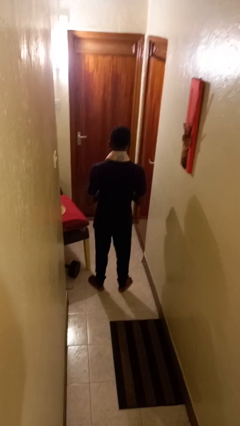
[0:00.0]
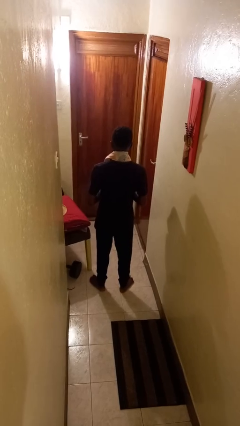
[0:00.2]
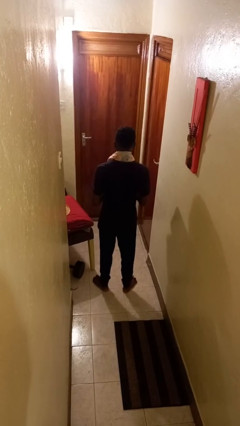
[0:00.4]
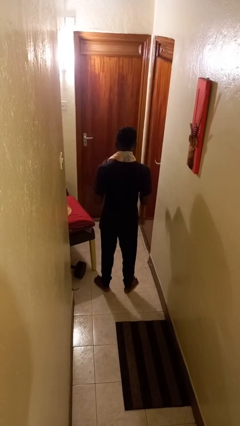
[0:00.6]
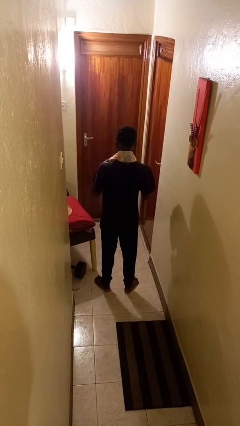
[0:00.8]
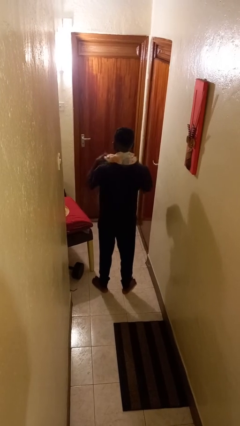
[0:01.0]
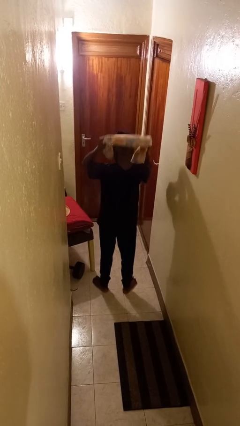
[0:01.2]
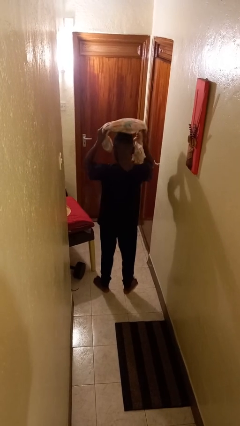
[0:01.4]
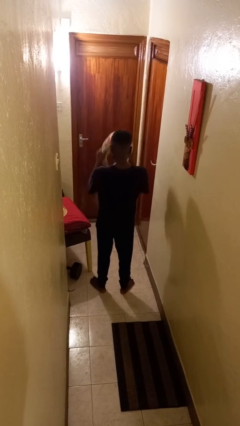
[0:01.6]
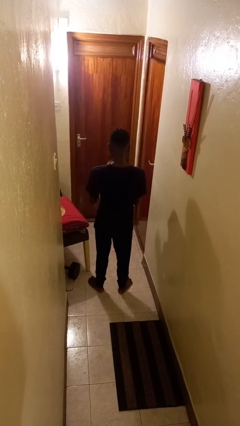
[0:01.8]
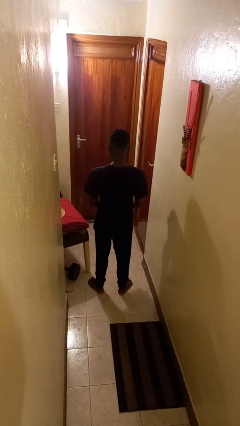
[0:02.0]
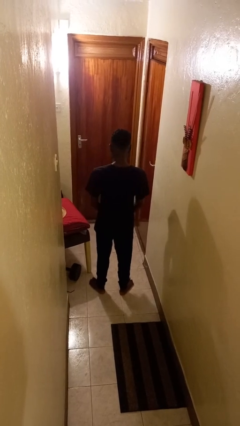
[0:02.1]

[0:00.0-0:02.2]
person takes off scarf

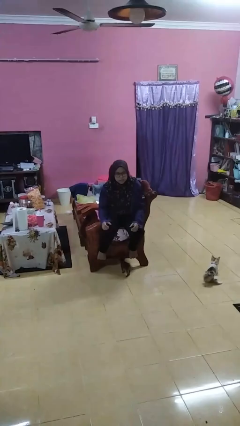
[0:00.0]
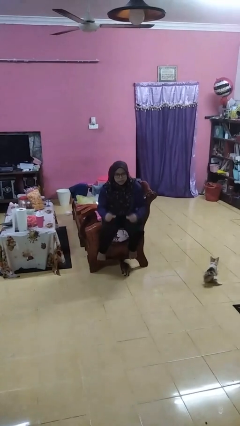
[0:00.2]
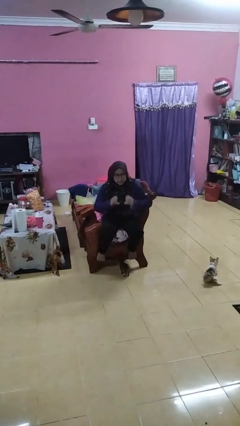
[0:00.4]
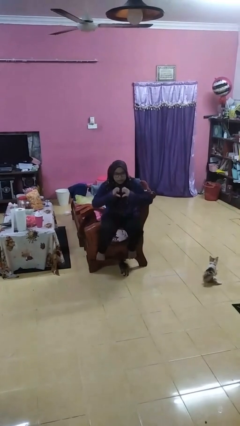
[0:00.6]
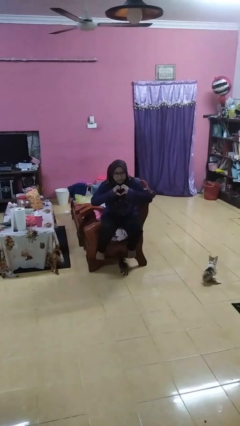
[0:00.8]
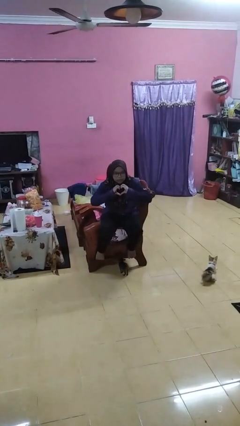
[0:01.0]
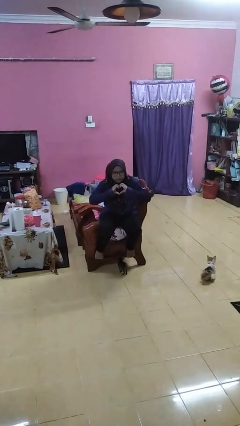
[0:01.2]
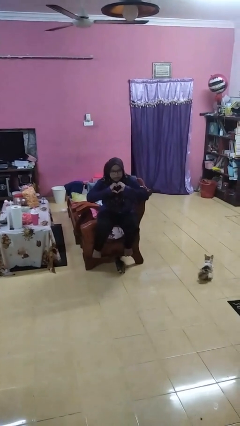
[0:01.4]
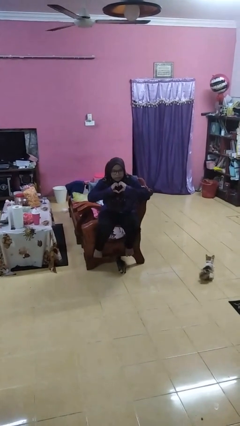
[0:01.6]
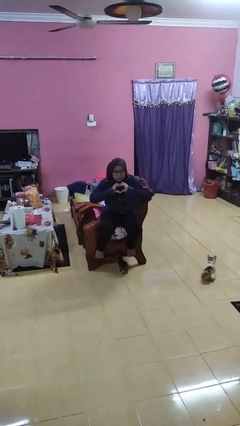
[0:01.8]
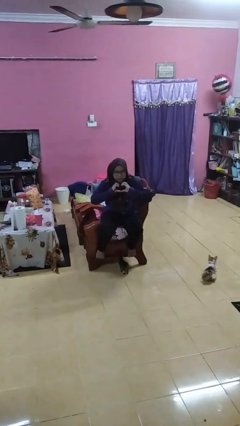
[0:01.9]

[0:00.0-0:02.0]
person gestures heart

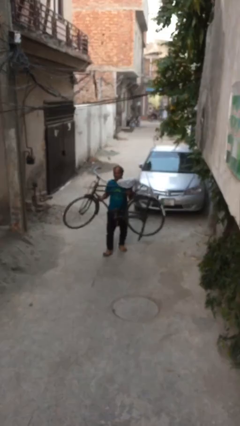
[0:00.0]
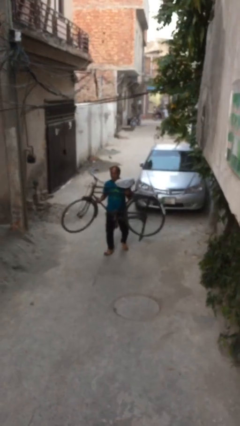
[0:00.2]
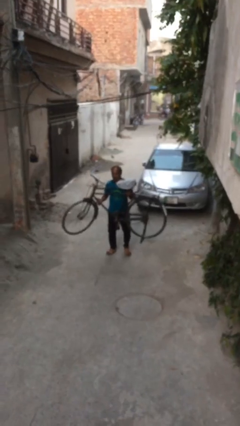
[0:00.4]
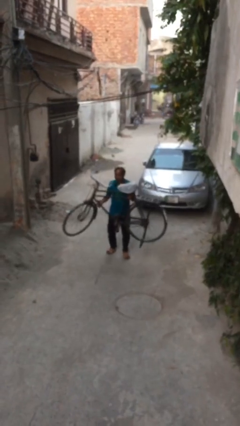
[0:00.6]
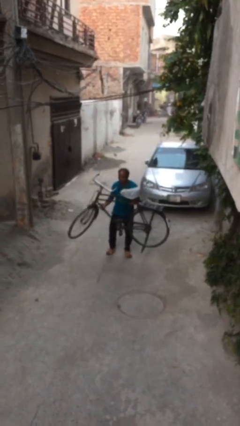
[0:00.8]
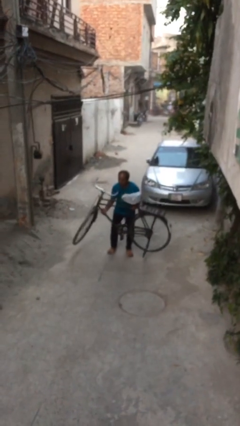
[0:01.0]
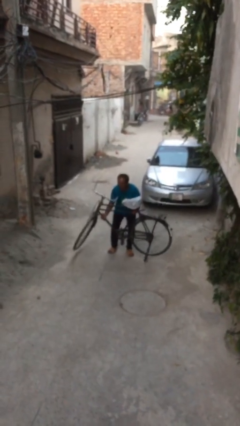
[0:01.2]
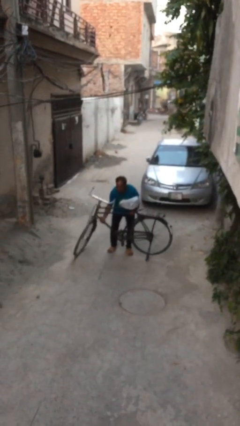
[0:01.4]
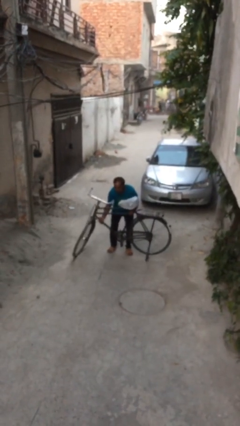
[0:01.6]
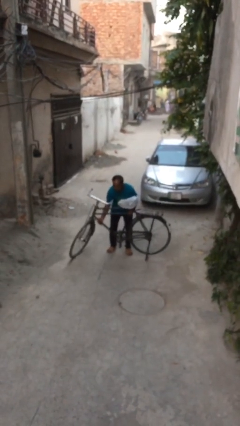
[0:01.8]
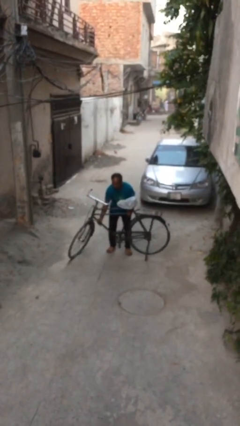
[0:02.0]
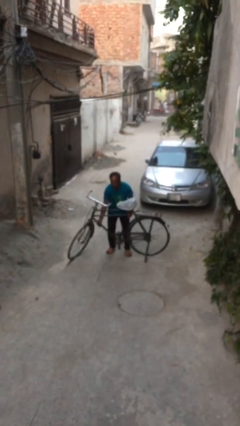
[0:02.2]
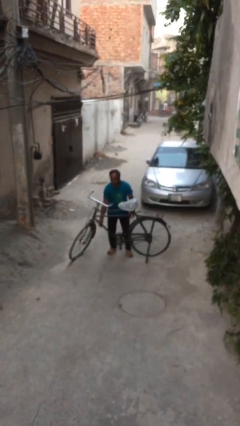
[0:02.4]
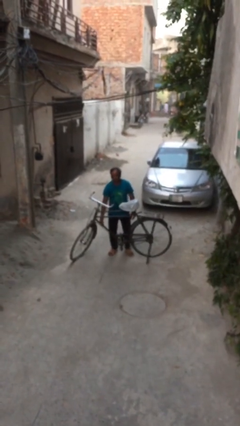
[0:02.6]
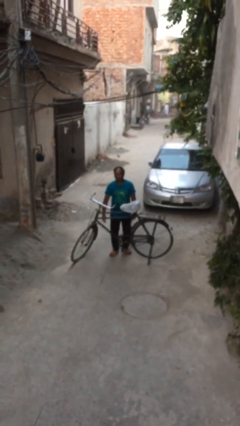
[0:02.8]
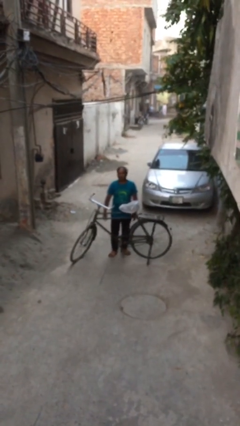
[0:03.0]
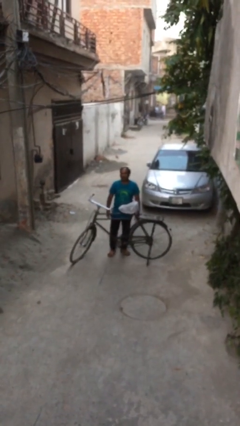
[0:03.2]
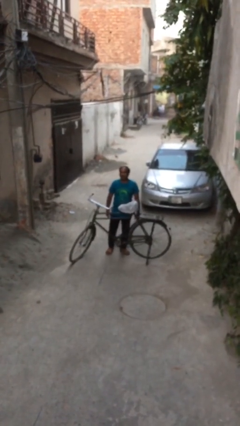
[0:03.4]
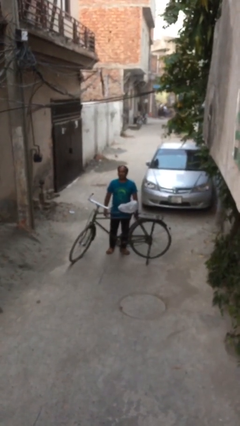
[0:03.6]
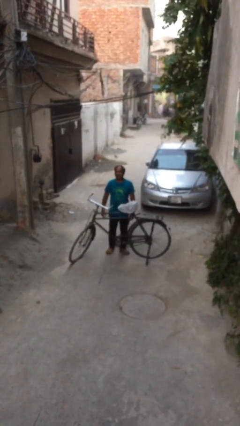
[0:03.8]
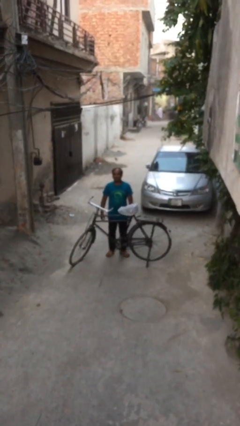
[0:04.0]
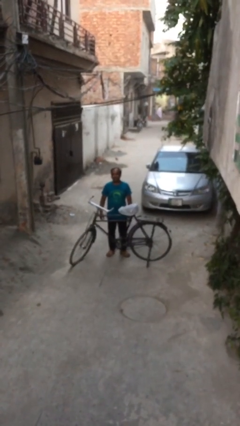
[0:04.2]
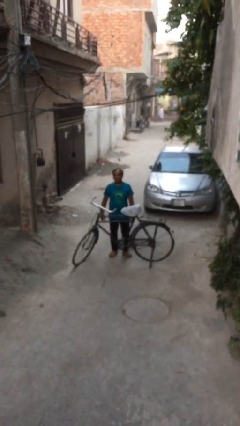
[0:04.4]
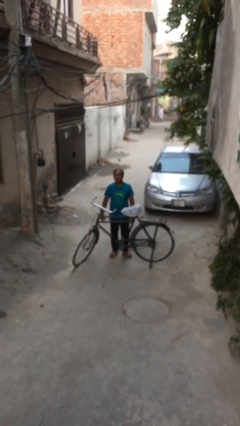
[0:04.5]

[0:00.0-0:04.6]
person puts down object on floor

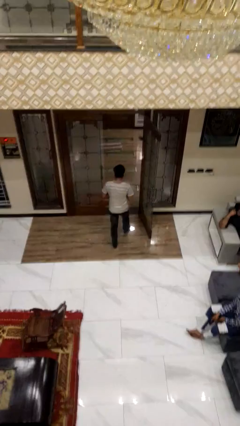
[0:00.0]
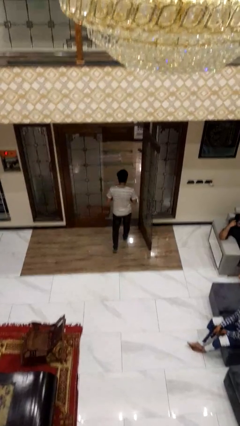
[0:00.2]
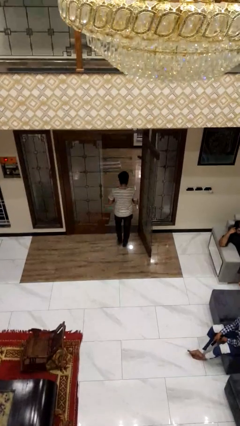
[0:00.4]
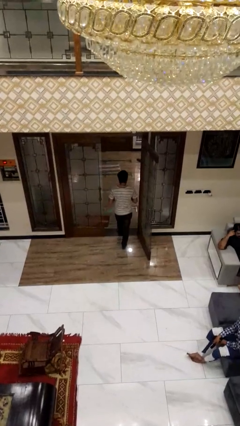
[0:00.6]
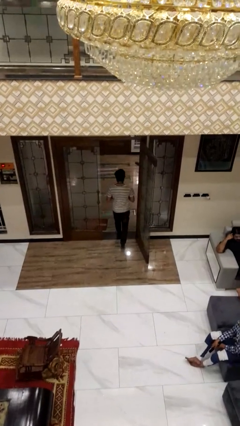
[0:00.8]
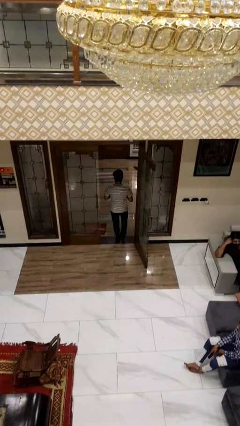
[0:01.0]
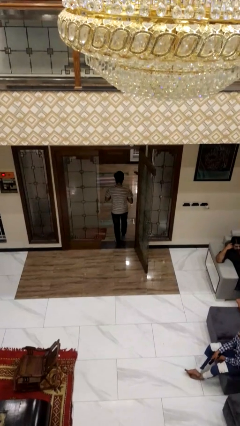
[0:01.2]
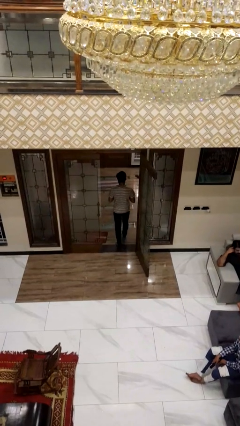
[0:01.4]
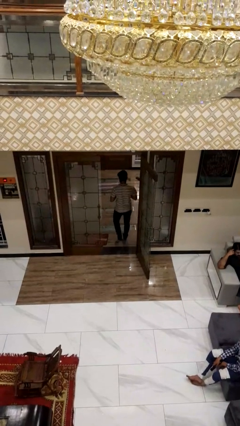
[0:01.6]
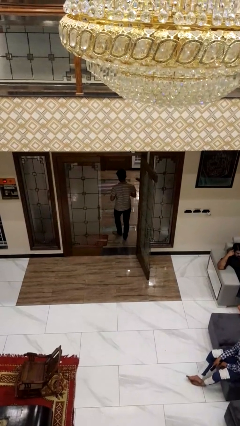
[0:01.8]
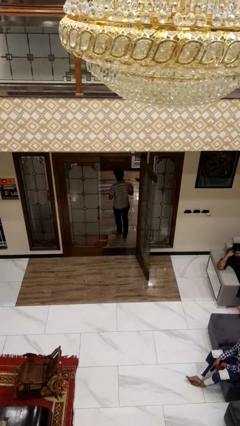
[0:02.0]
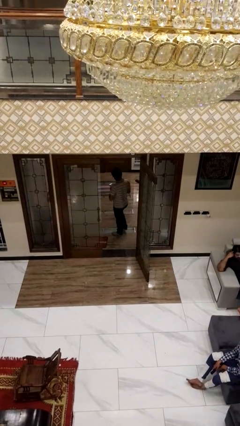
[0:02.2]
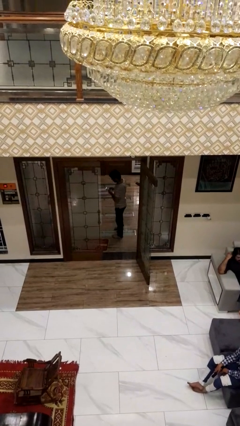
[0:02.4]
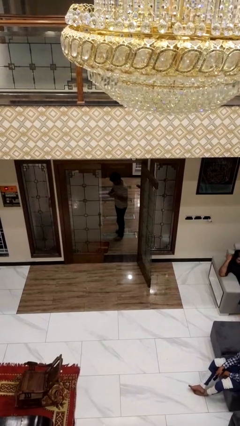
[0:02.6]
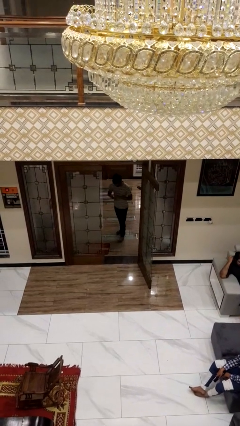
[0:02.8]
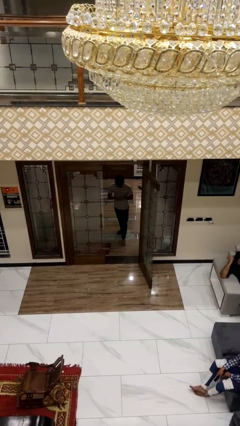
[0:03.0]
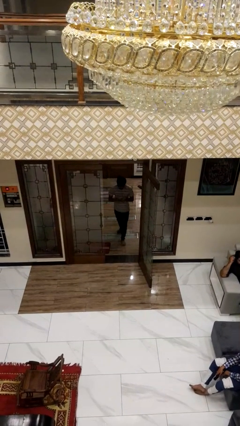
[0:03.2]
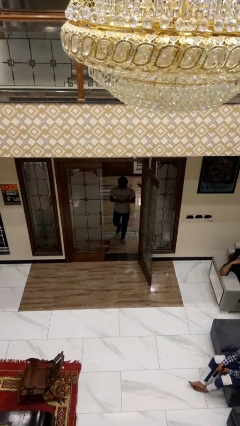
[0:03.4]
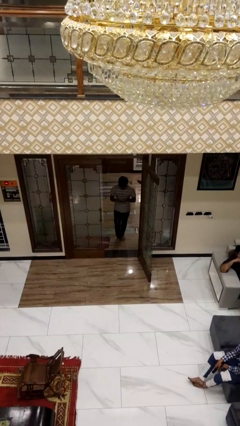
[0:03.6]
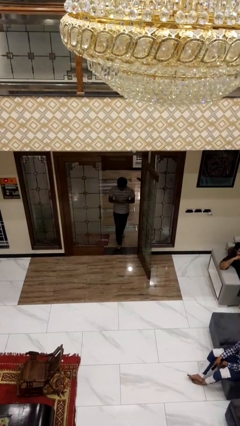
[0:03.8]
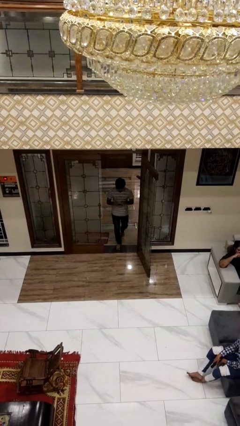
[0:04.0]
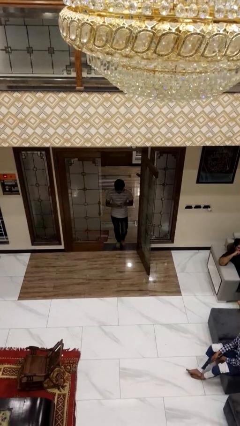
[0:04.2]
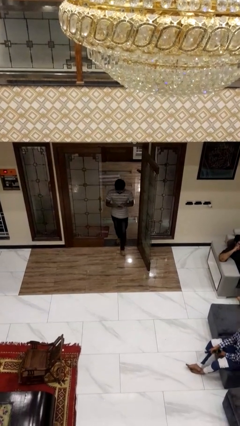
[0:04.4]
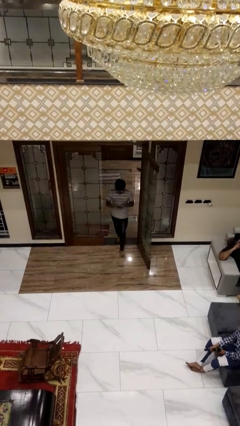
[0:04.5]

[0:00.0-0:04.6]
person exits scene through structure

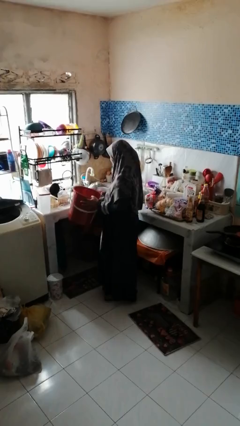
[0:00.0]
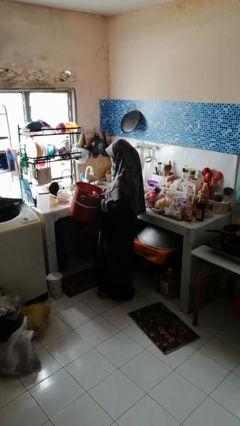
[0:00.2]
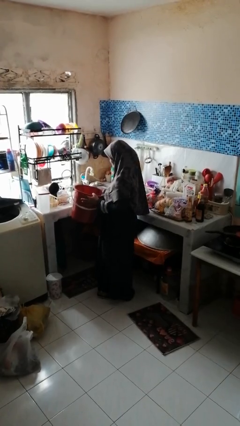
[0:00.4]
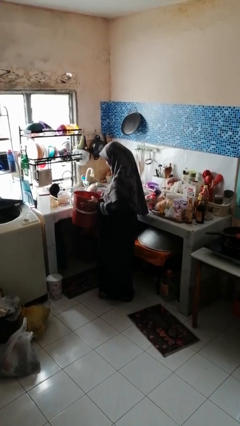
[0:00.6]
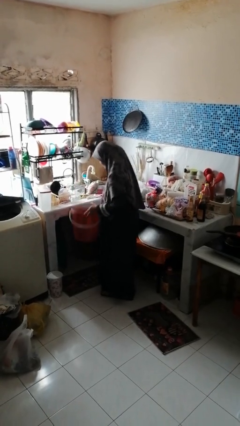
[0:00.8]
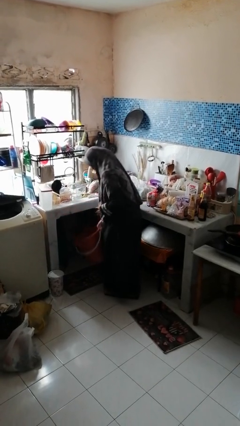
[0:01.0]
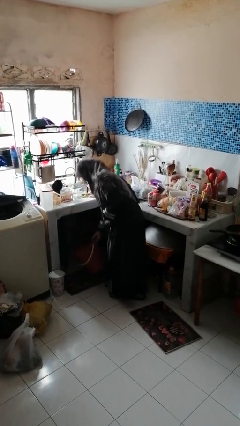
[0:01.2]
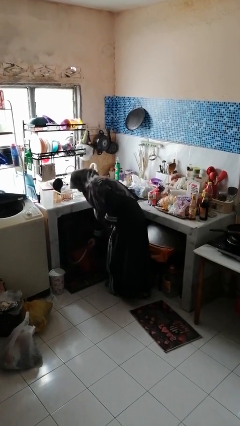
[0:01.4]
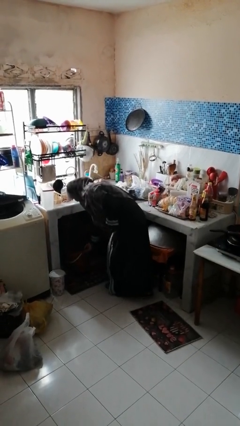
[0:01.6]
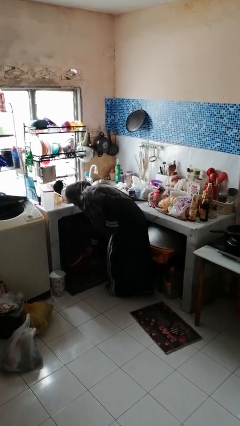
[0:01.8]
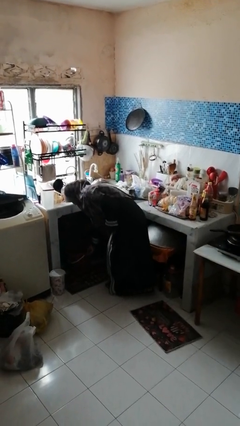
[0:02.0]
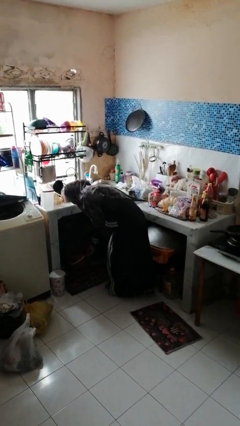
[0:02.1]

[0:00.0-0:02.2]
person puts down object into cabinet

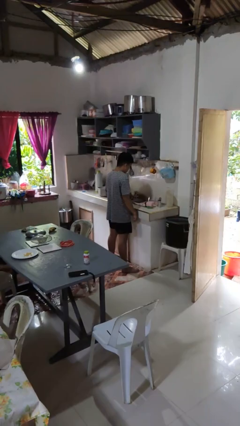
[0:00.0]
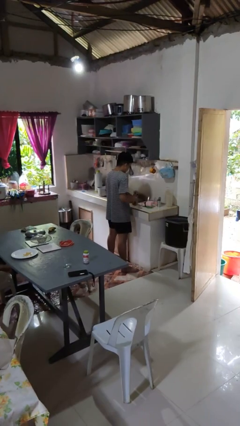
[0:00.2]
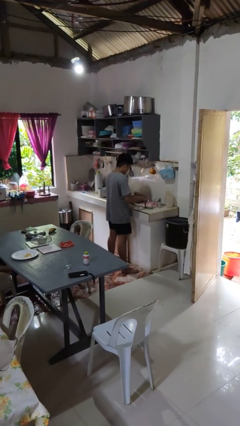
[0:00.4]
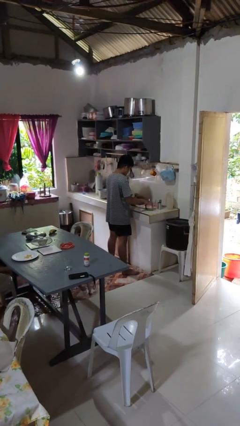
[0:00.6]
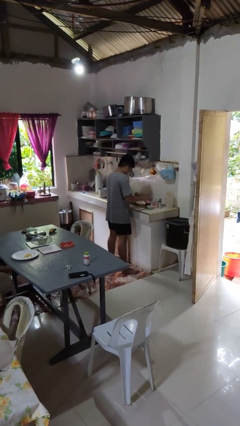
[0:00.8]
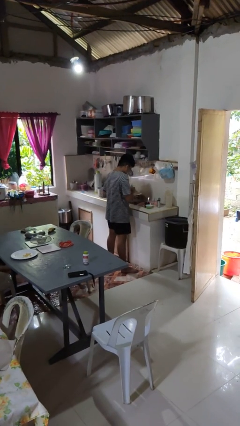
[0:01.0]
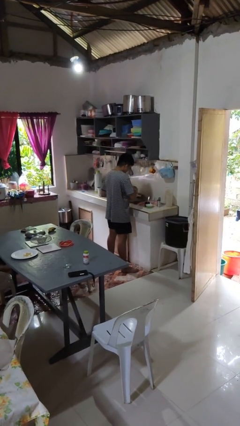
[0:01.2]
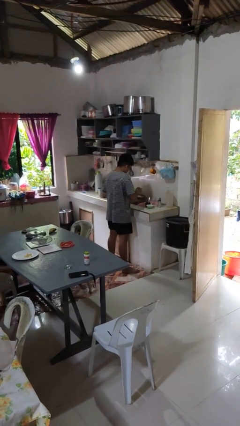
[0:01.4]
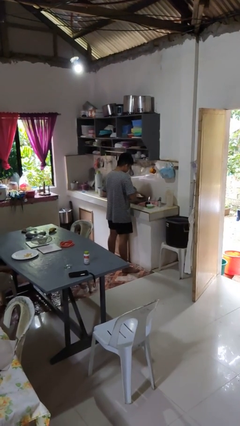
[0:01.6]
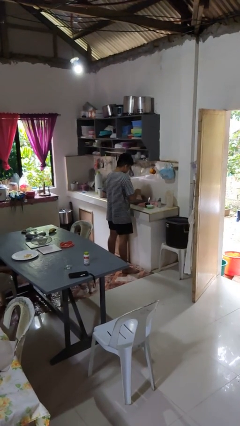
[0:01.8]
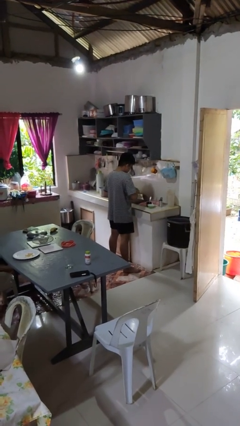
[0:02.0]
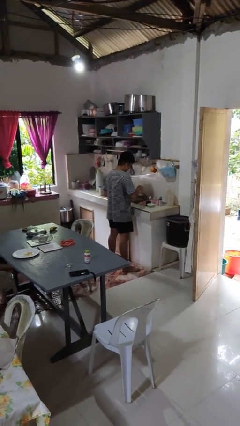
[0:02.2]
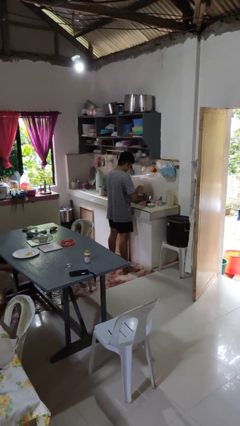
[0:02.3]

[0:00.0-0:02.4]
person washes dish
